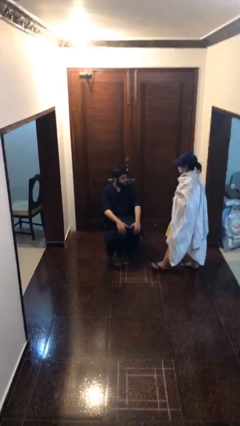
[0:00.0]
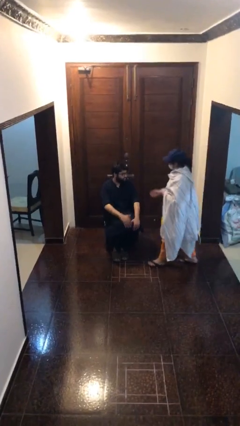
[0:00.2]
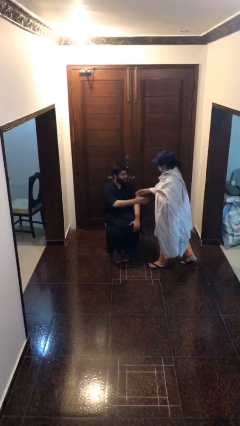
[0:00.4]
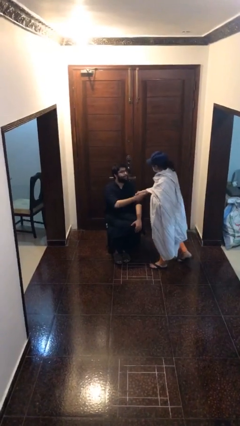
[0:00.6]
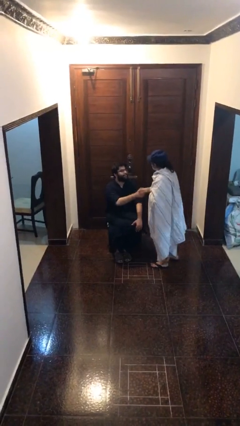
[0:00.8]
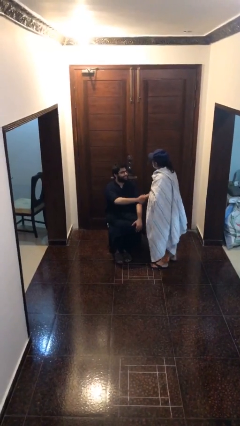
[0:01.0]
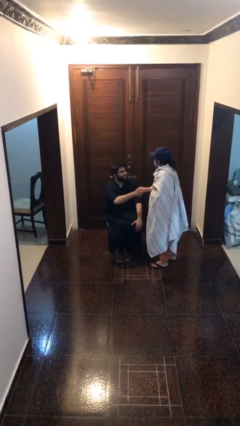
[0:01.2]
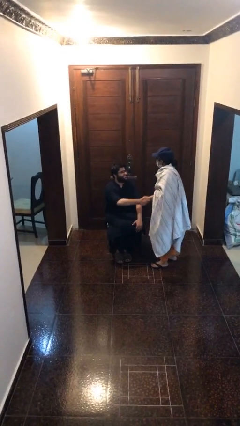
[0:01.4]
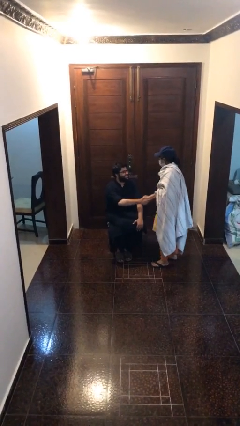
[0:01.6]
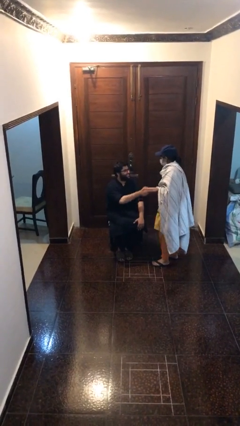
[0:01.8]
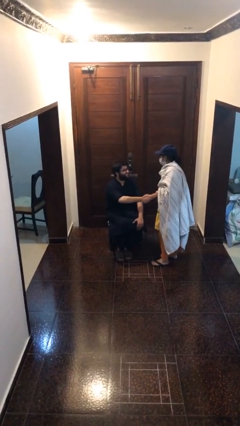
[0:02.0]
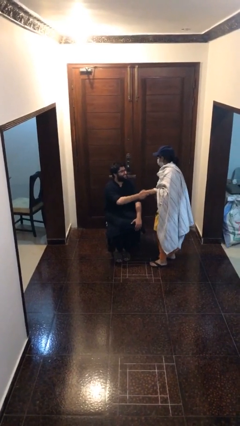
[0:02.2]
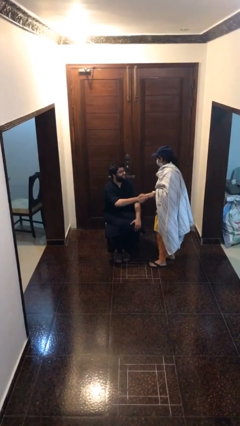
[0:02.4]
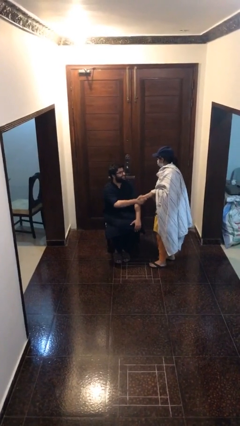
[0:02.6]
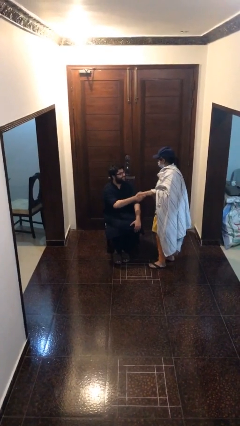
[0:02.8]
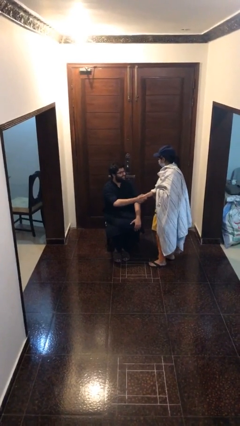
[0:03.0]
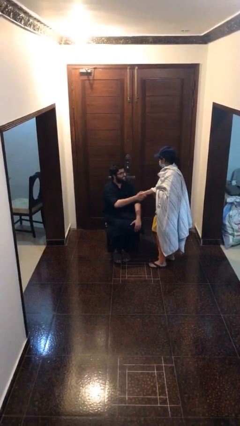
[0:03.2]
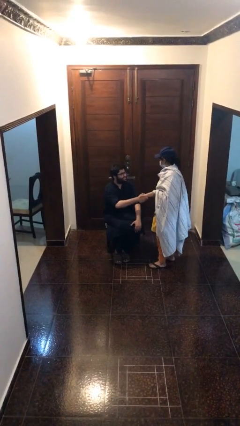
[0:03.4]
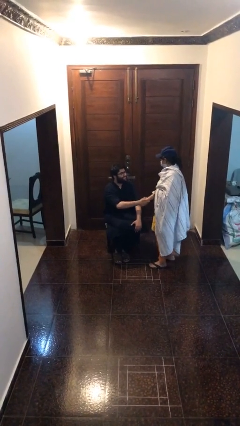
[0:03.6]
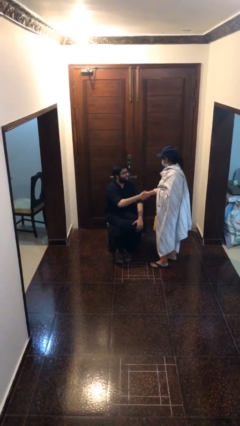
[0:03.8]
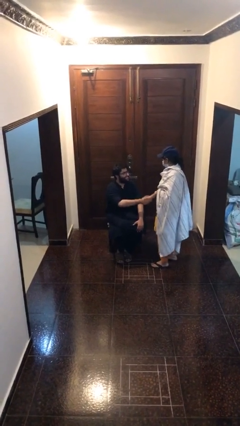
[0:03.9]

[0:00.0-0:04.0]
person shakes hand

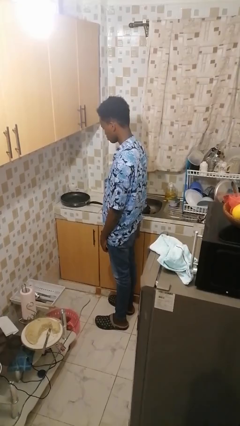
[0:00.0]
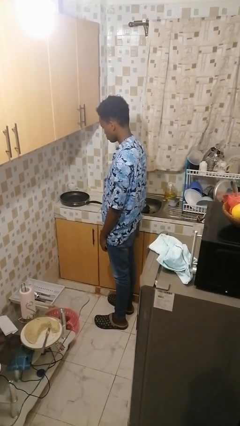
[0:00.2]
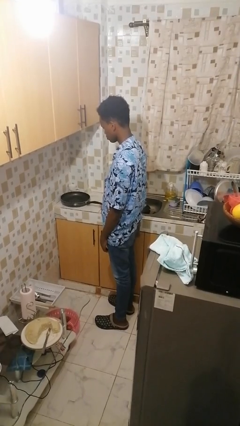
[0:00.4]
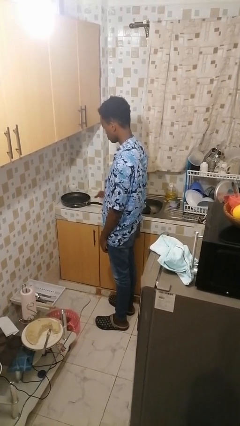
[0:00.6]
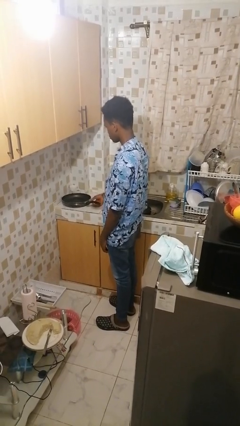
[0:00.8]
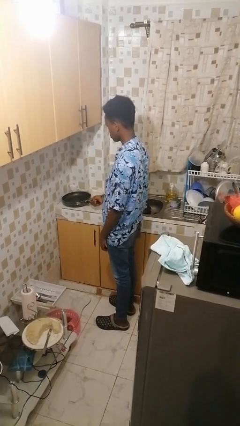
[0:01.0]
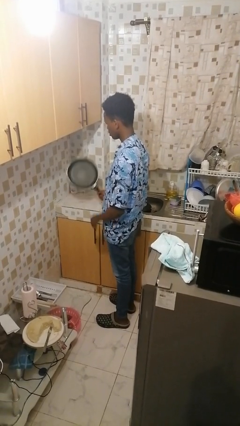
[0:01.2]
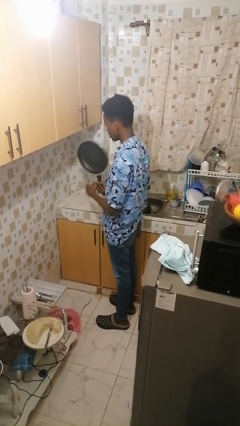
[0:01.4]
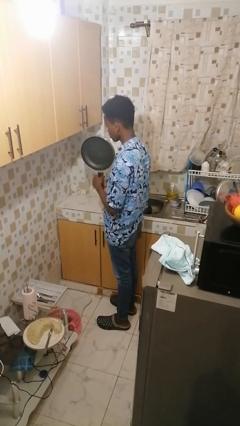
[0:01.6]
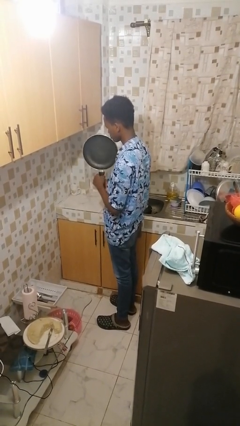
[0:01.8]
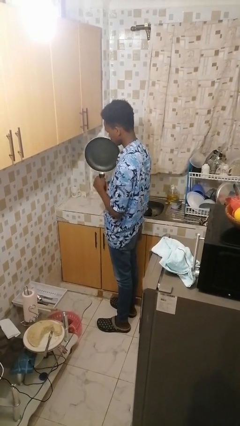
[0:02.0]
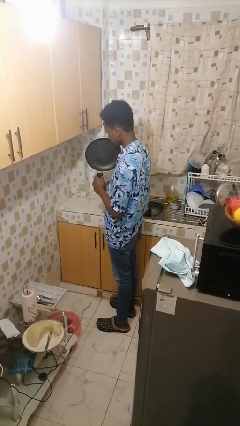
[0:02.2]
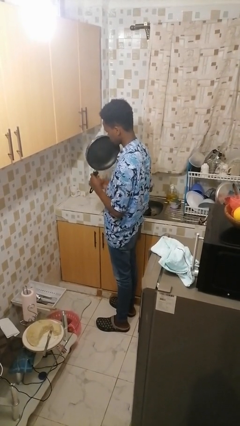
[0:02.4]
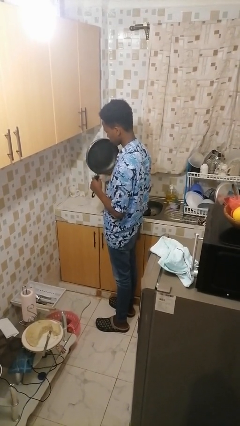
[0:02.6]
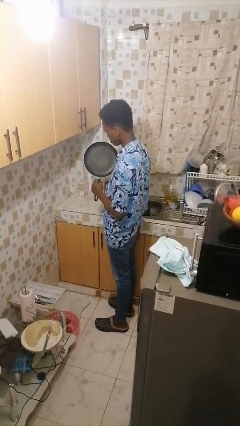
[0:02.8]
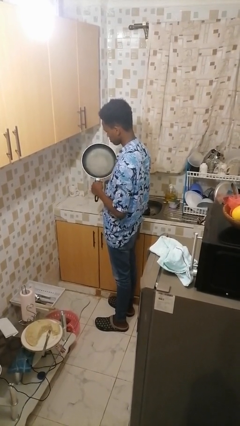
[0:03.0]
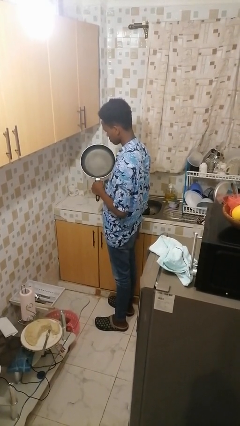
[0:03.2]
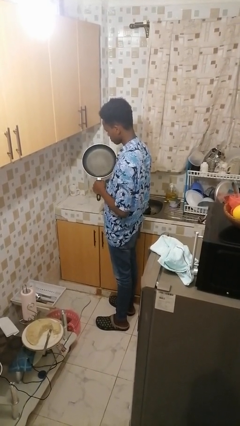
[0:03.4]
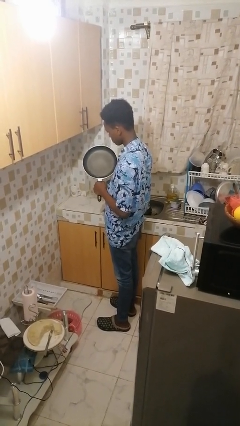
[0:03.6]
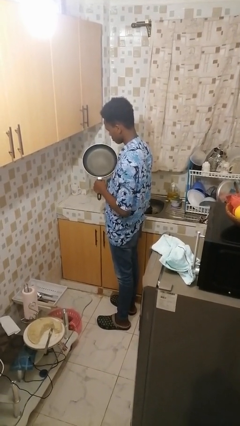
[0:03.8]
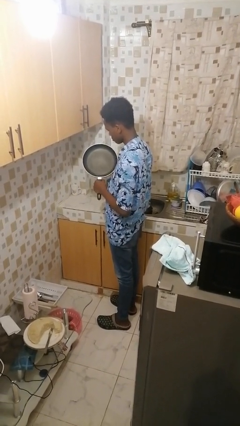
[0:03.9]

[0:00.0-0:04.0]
person picks up object from countertop

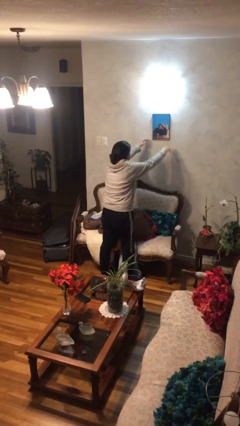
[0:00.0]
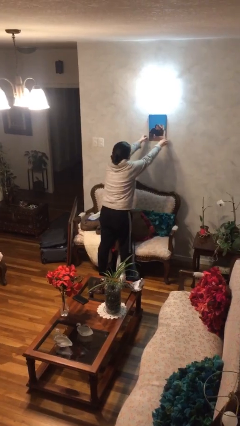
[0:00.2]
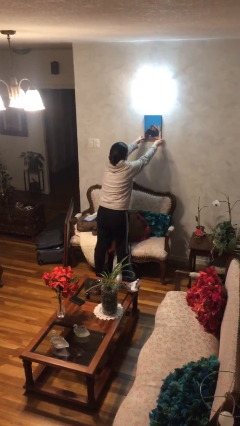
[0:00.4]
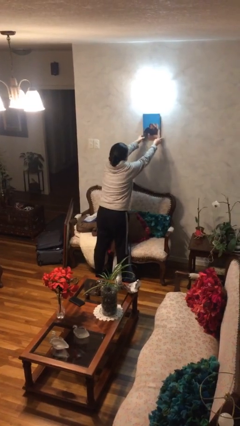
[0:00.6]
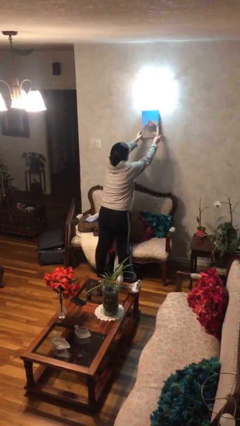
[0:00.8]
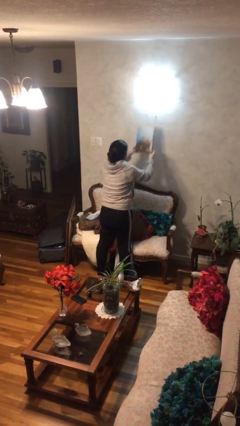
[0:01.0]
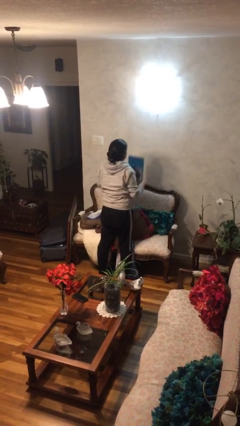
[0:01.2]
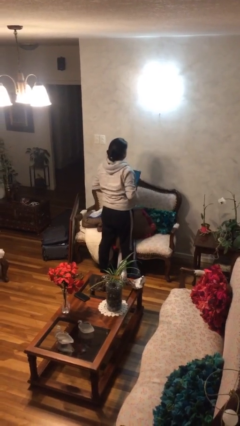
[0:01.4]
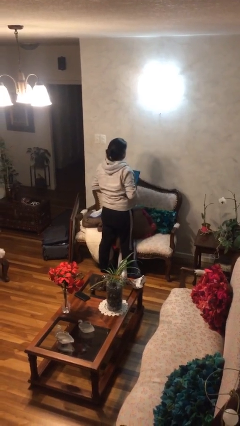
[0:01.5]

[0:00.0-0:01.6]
person takes down picture frame

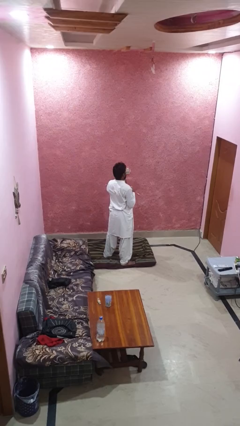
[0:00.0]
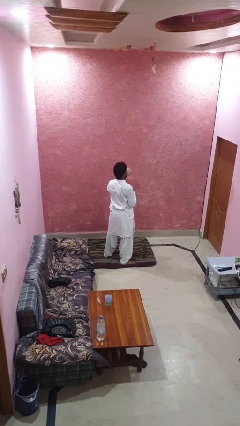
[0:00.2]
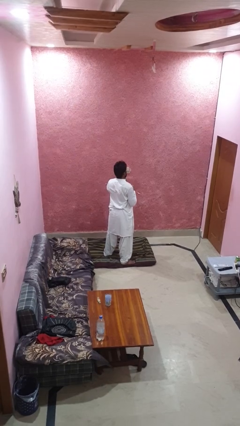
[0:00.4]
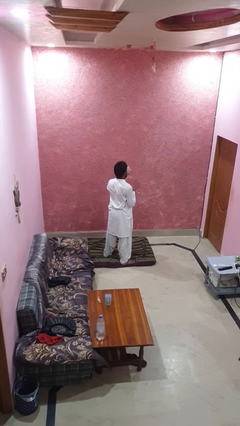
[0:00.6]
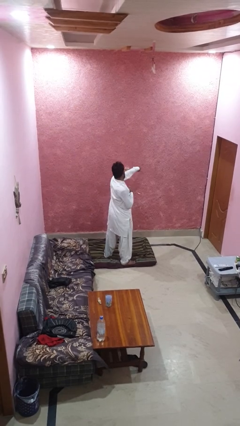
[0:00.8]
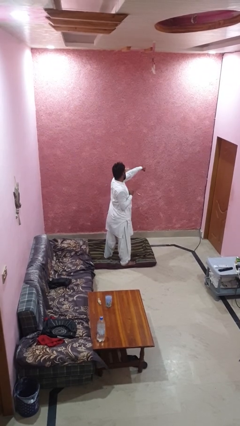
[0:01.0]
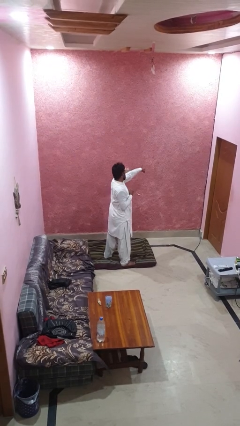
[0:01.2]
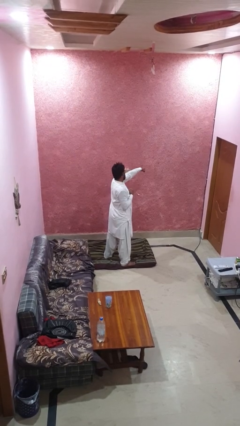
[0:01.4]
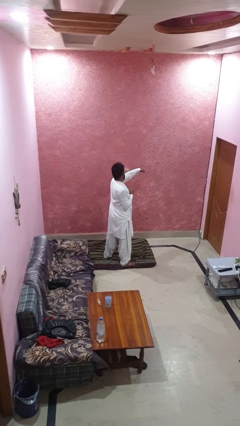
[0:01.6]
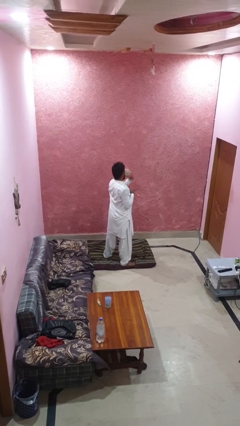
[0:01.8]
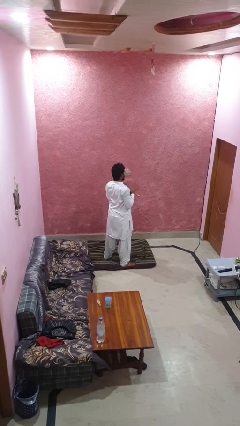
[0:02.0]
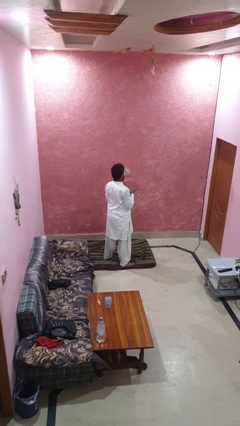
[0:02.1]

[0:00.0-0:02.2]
person punches

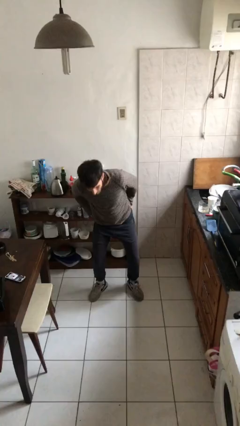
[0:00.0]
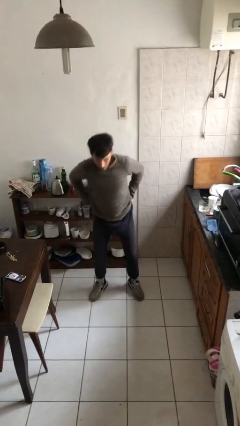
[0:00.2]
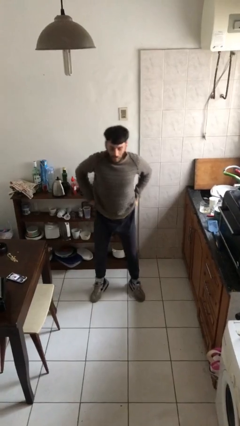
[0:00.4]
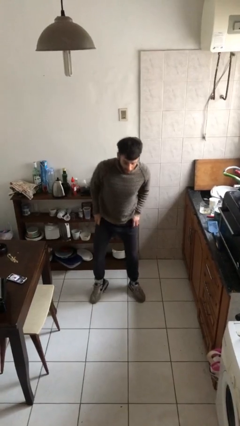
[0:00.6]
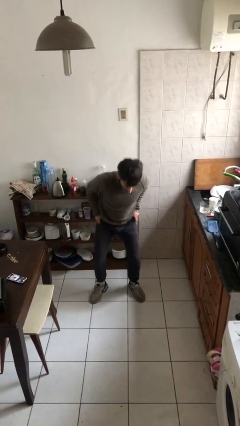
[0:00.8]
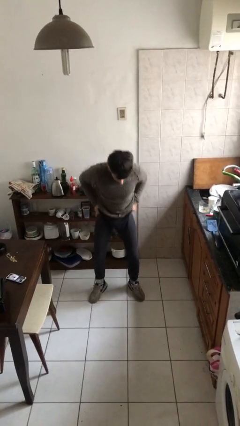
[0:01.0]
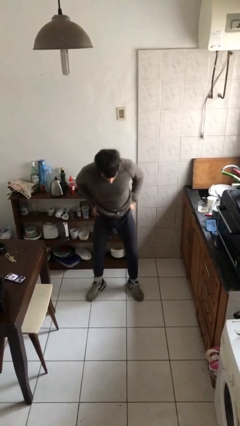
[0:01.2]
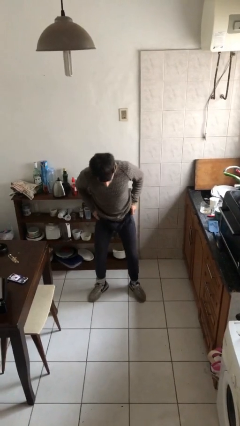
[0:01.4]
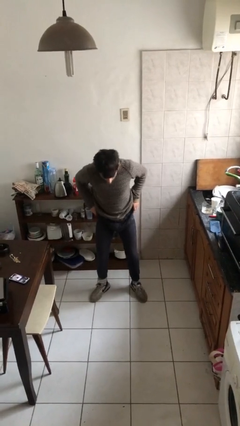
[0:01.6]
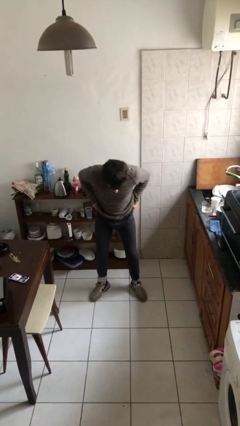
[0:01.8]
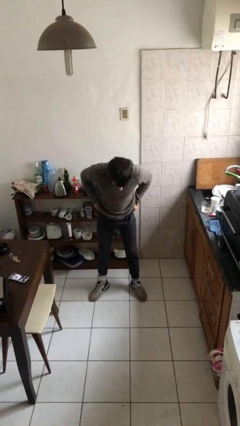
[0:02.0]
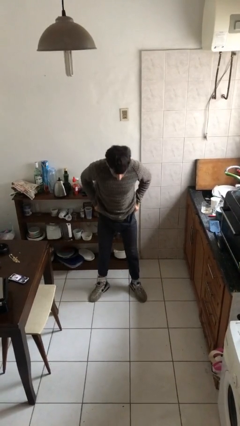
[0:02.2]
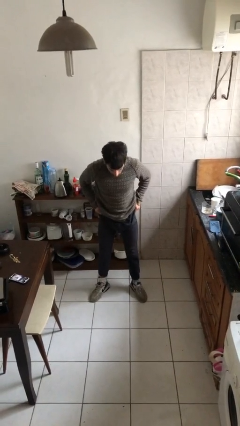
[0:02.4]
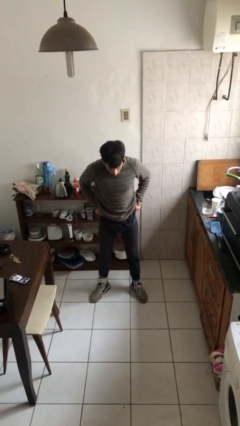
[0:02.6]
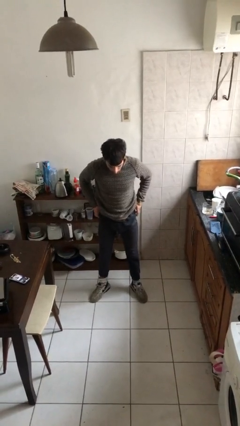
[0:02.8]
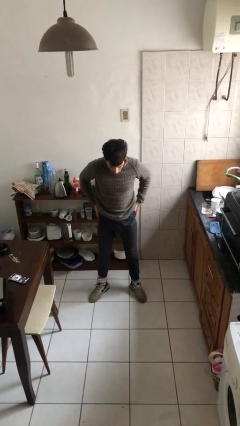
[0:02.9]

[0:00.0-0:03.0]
person hikes up pants

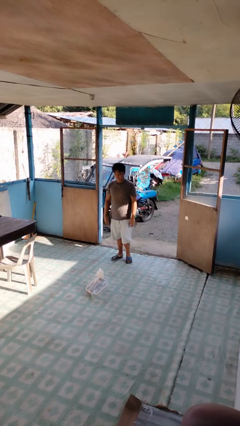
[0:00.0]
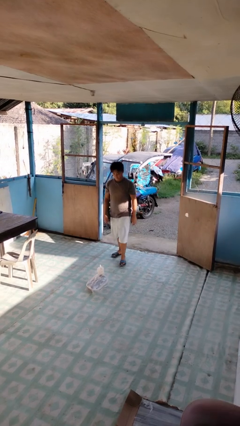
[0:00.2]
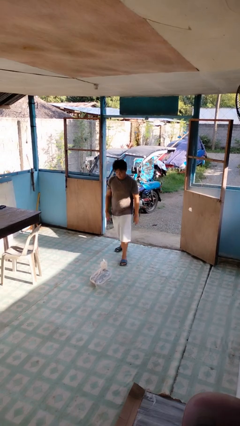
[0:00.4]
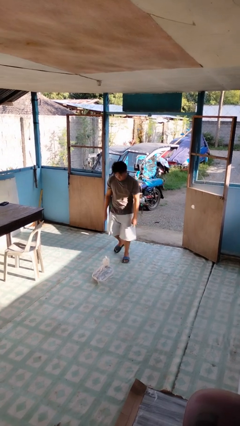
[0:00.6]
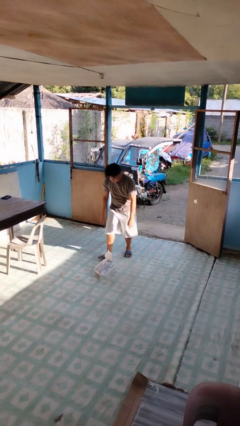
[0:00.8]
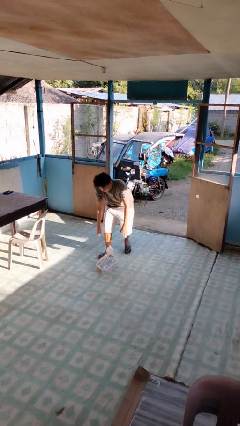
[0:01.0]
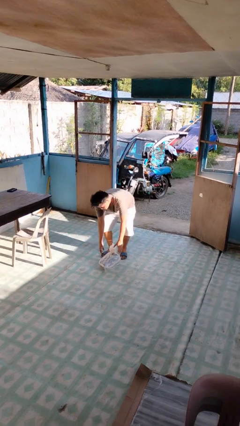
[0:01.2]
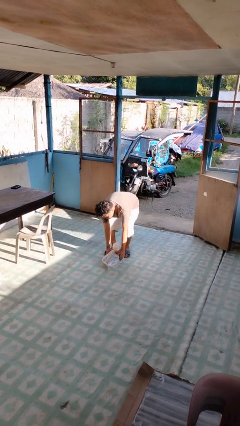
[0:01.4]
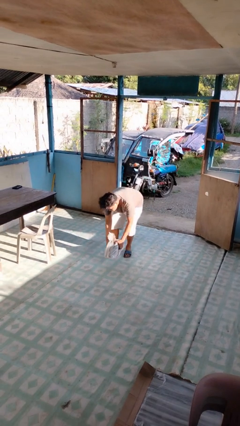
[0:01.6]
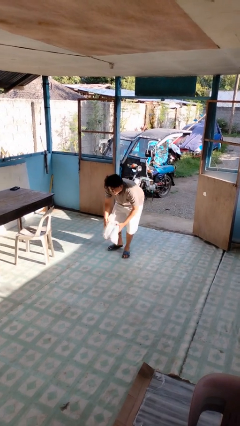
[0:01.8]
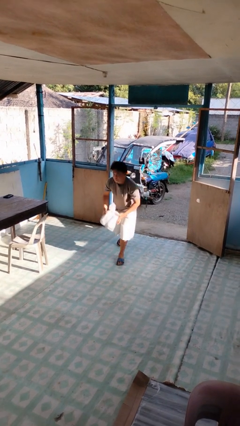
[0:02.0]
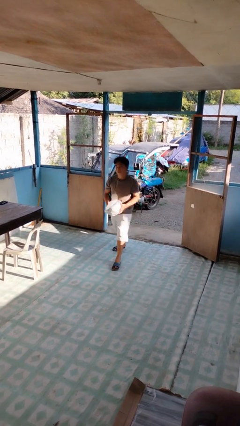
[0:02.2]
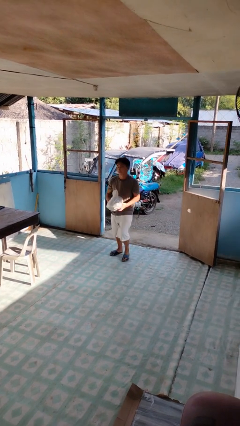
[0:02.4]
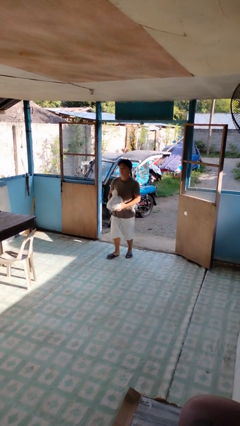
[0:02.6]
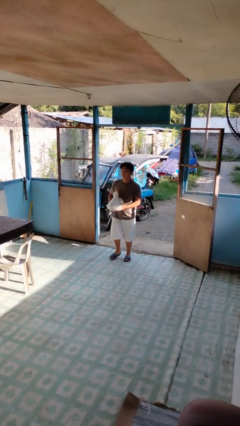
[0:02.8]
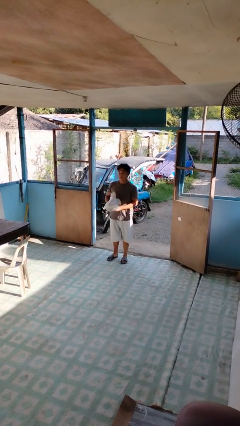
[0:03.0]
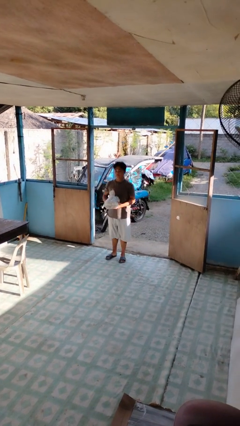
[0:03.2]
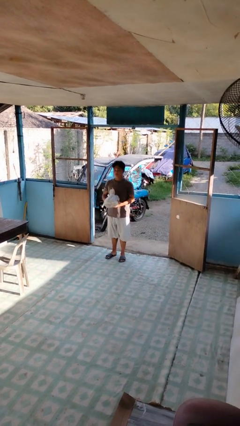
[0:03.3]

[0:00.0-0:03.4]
person picks up object from floor
